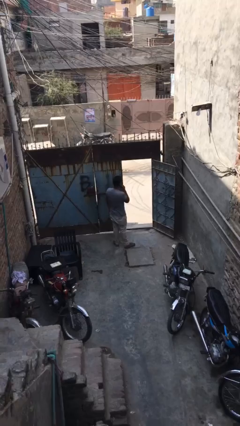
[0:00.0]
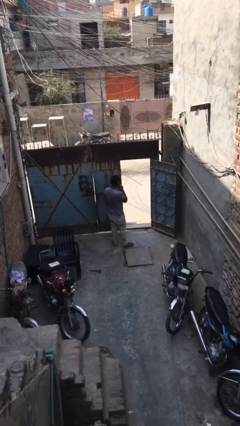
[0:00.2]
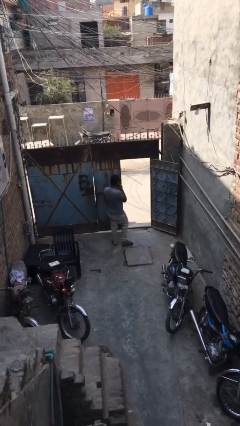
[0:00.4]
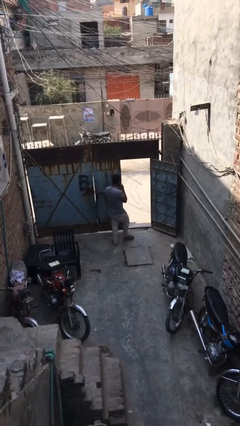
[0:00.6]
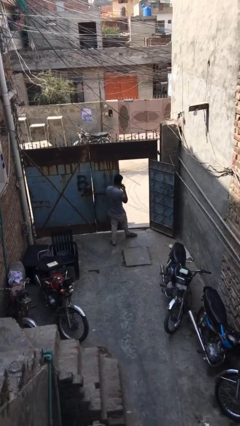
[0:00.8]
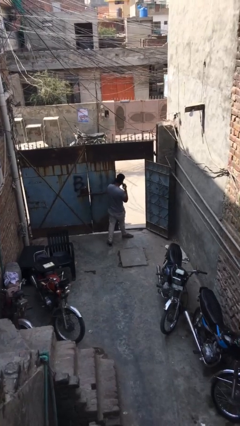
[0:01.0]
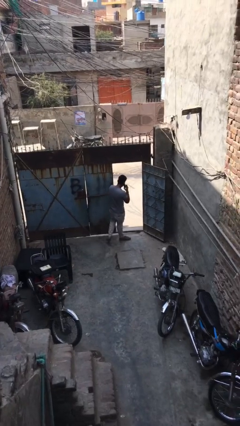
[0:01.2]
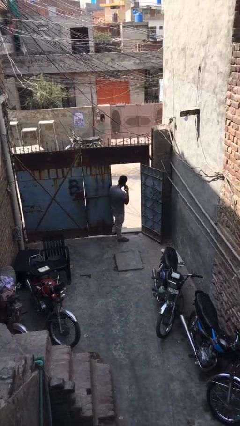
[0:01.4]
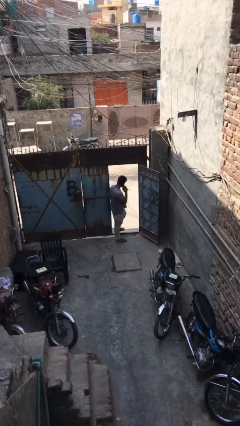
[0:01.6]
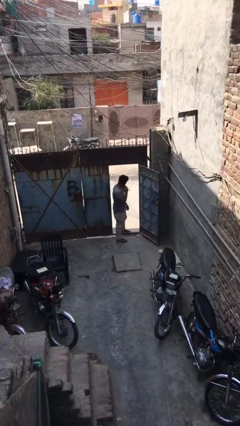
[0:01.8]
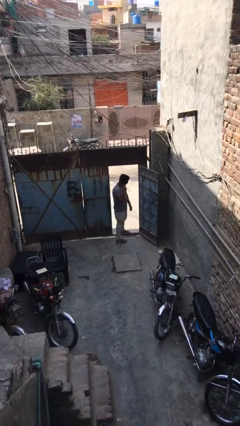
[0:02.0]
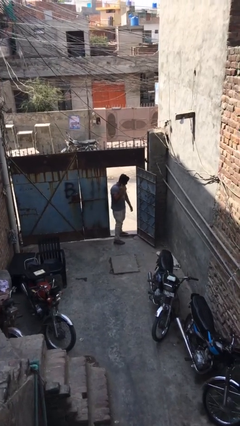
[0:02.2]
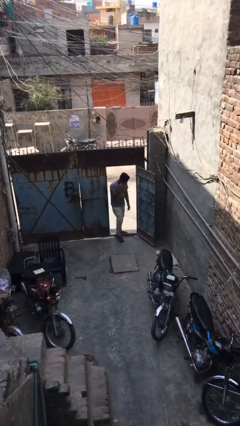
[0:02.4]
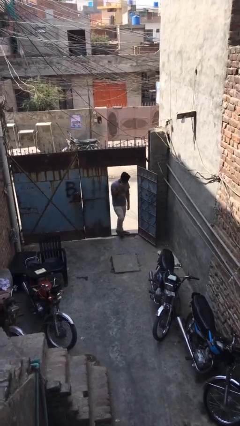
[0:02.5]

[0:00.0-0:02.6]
person exits scene through structure

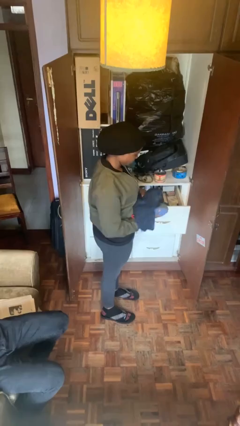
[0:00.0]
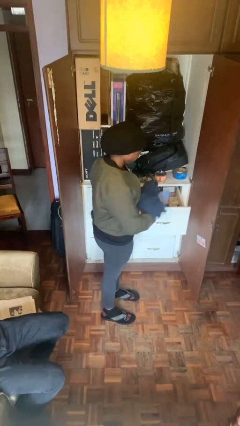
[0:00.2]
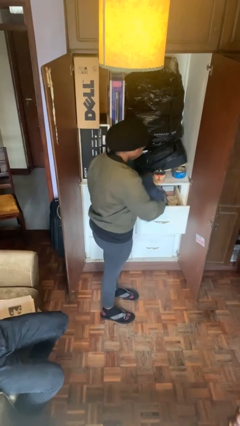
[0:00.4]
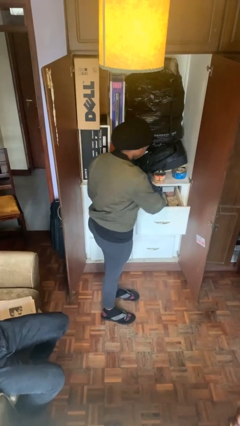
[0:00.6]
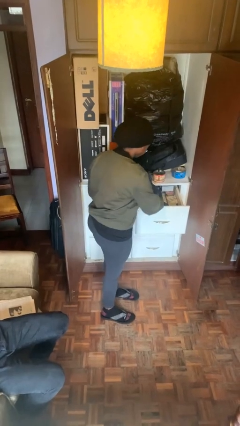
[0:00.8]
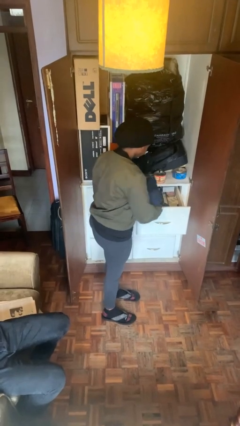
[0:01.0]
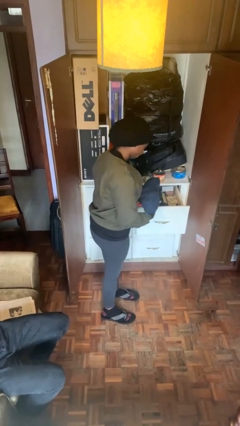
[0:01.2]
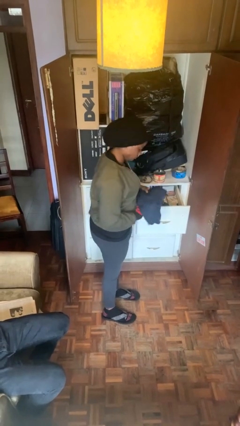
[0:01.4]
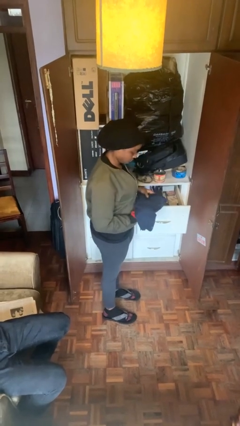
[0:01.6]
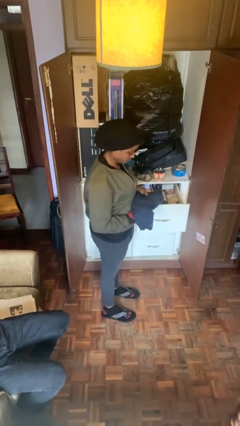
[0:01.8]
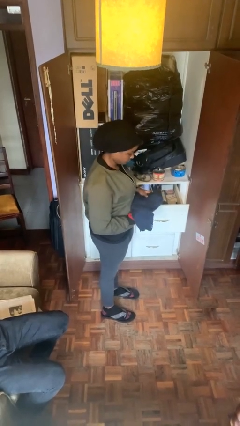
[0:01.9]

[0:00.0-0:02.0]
person puts clothes into dresser

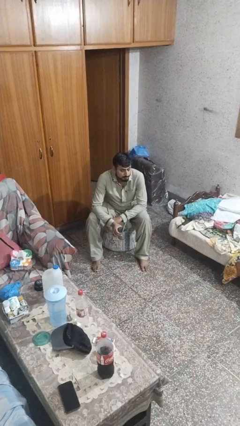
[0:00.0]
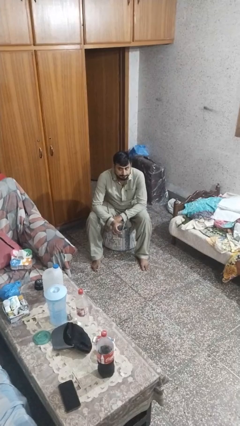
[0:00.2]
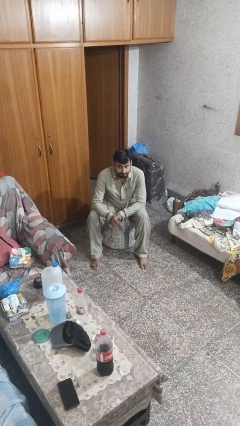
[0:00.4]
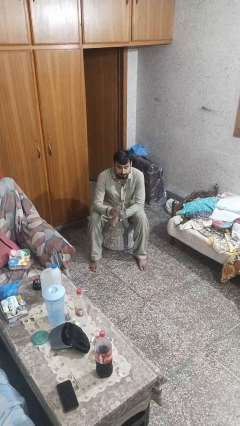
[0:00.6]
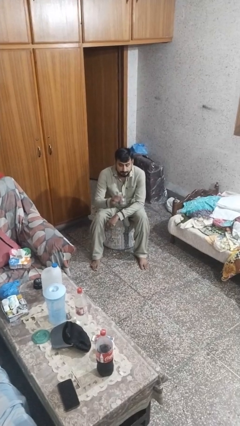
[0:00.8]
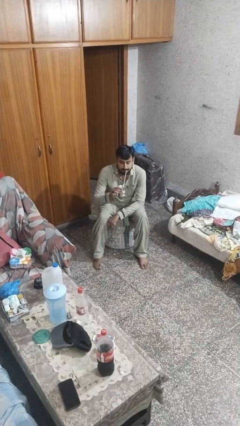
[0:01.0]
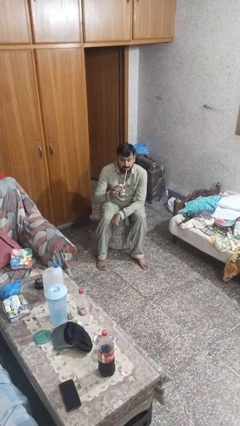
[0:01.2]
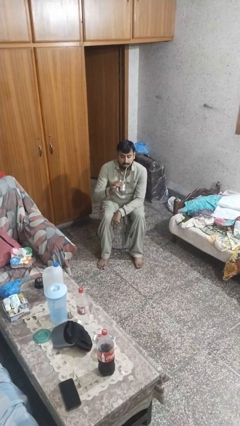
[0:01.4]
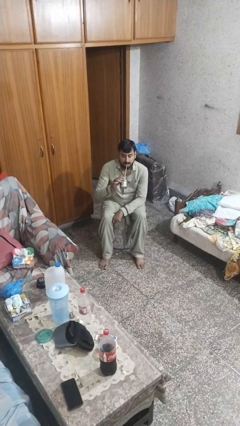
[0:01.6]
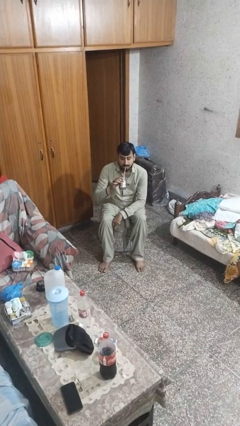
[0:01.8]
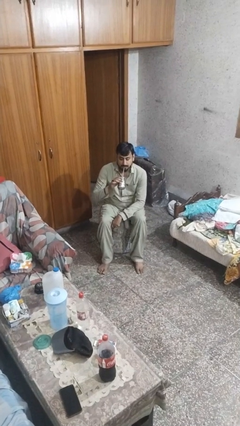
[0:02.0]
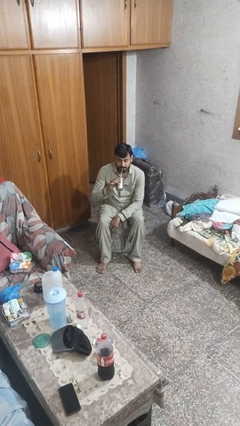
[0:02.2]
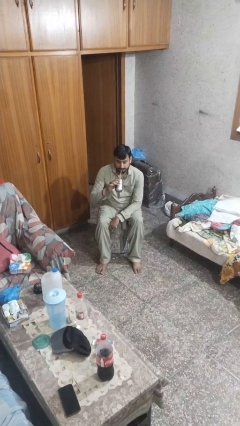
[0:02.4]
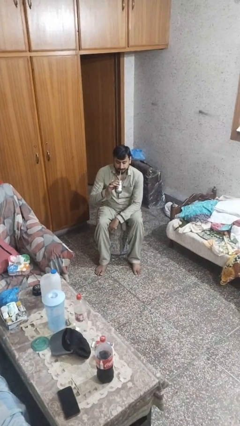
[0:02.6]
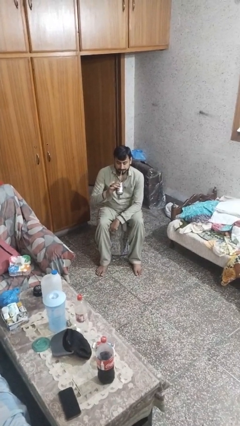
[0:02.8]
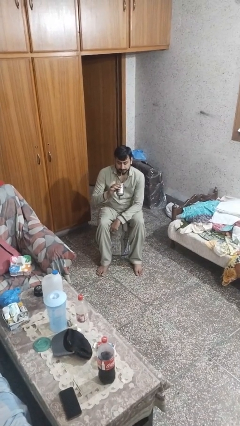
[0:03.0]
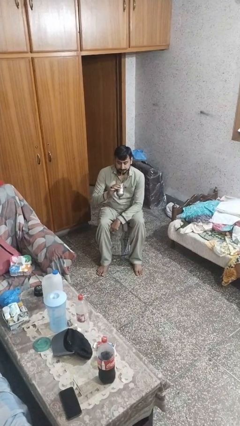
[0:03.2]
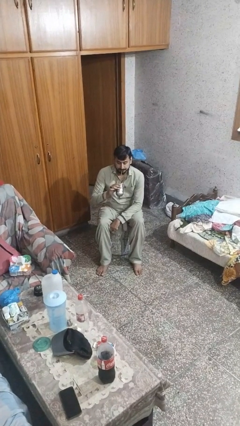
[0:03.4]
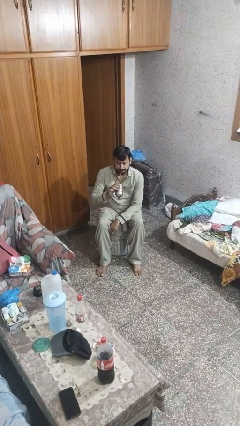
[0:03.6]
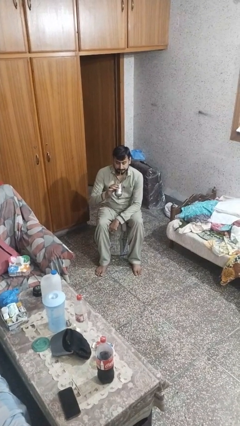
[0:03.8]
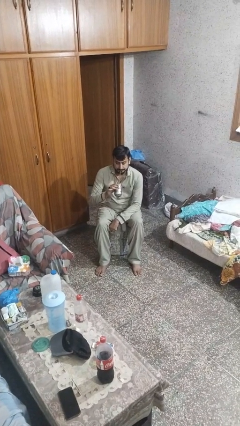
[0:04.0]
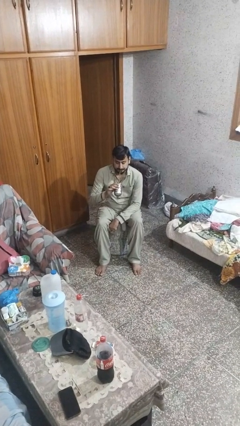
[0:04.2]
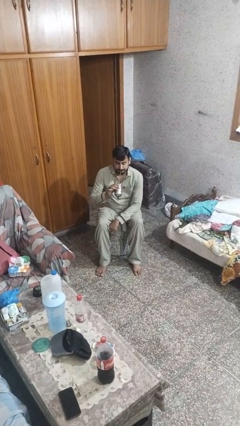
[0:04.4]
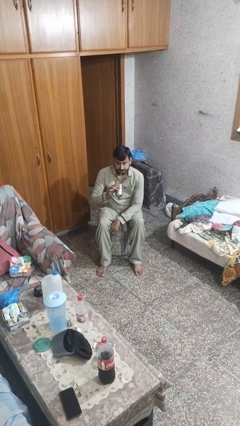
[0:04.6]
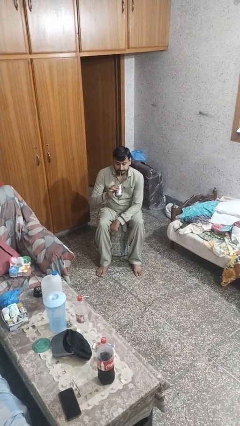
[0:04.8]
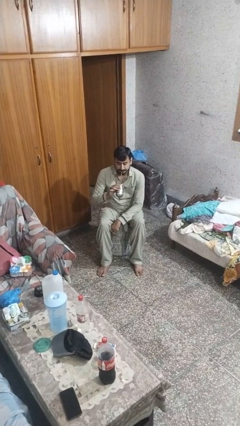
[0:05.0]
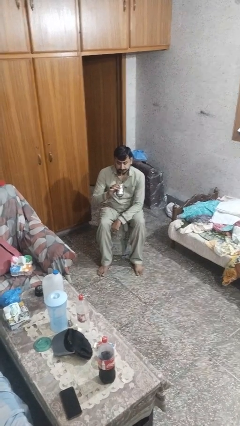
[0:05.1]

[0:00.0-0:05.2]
person drinks from straw

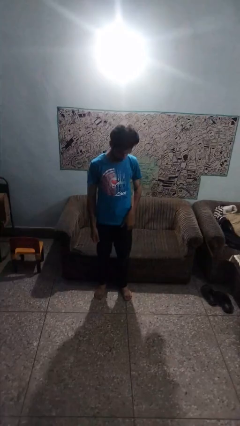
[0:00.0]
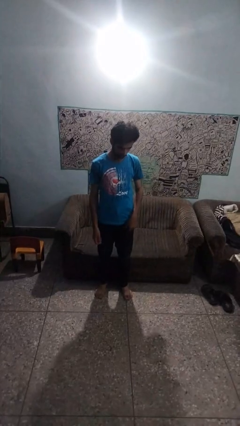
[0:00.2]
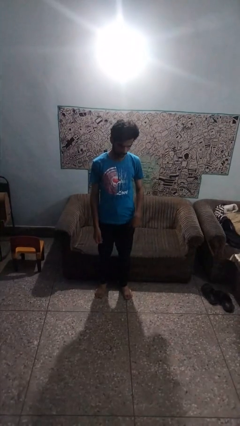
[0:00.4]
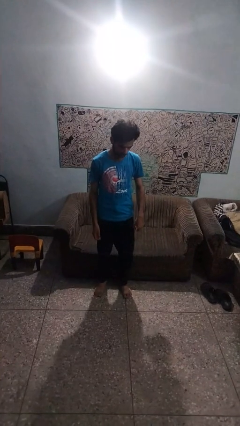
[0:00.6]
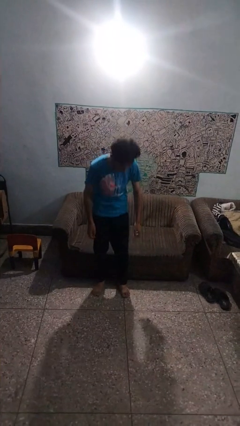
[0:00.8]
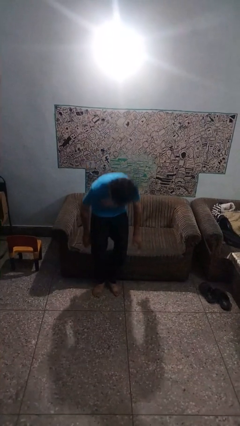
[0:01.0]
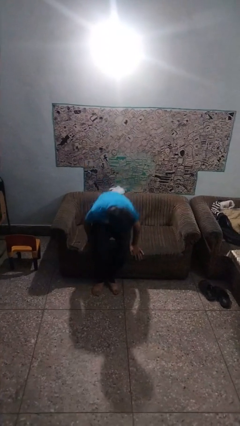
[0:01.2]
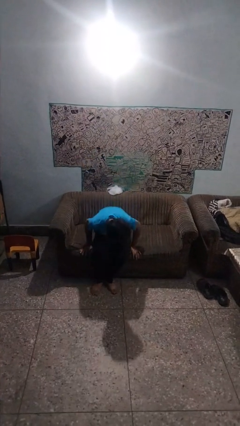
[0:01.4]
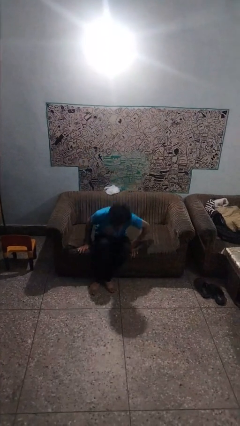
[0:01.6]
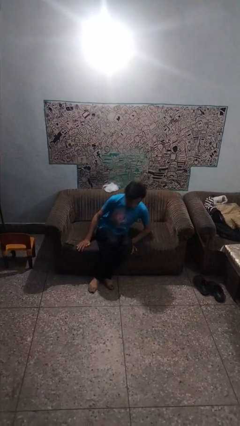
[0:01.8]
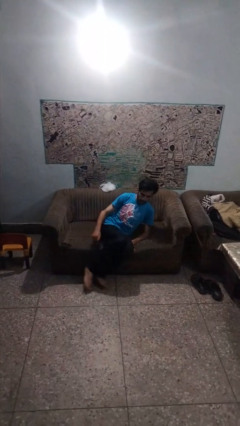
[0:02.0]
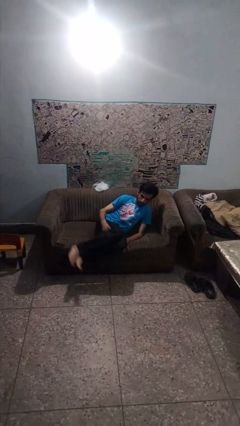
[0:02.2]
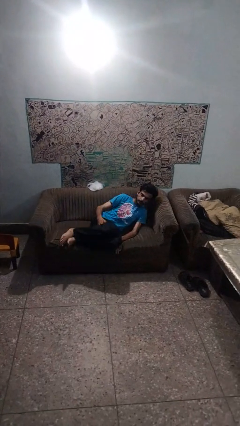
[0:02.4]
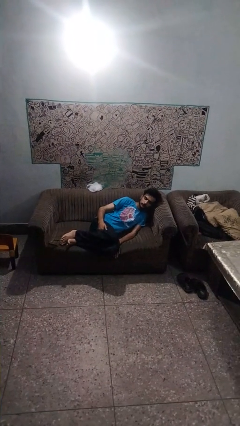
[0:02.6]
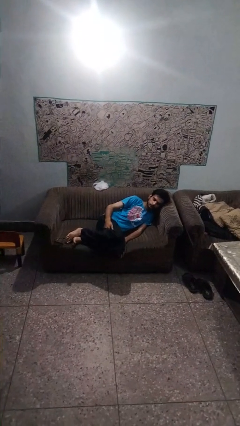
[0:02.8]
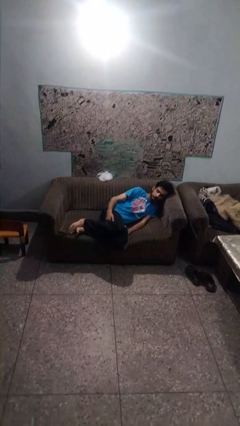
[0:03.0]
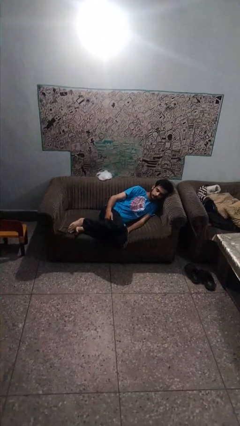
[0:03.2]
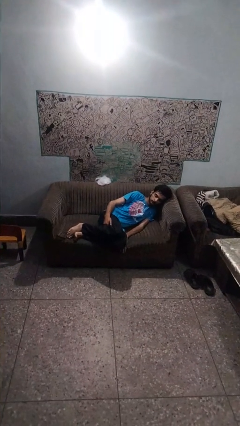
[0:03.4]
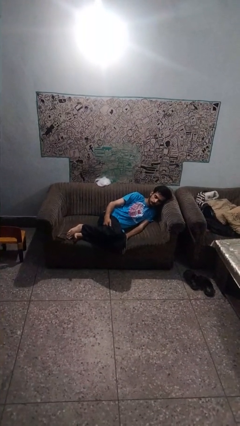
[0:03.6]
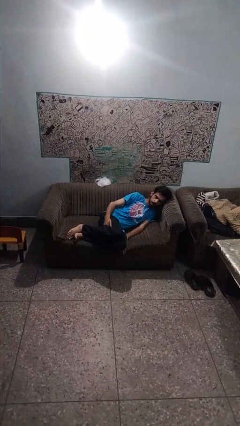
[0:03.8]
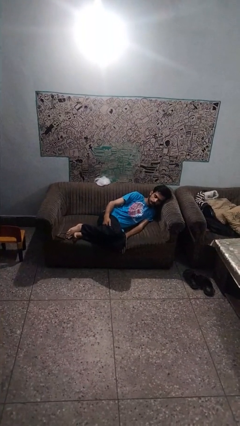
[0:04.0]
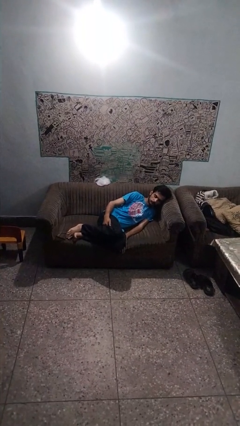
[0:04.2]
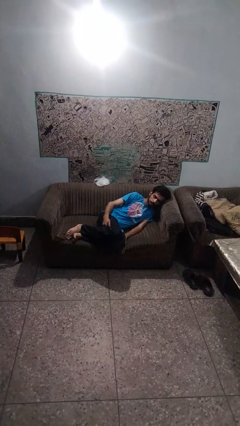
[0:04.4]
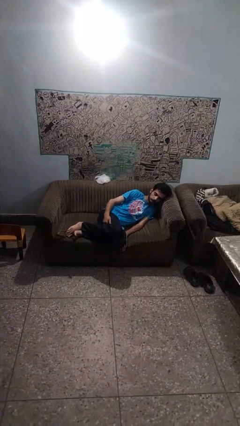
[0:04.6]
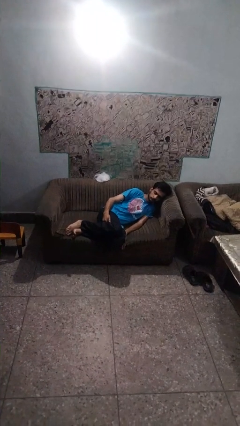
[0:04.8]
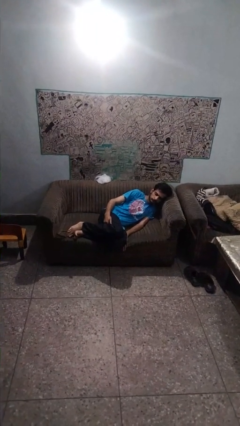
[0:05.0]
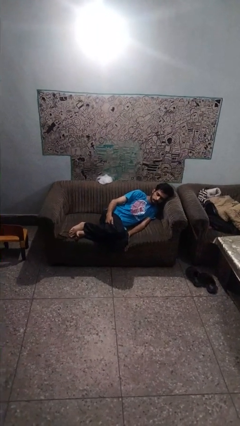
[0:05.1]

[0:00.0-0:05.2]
person lies down on couch

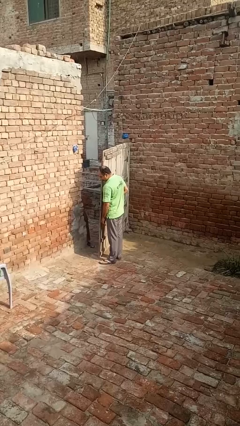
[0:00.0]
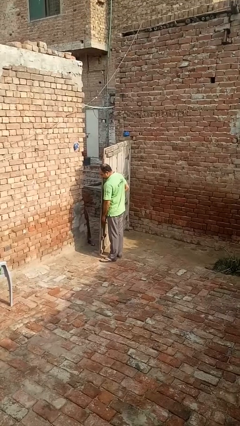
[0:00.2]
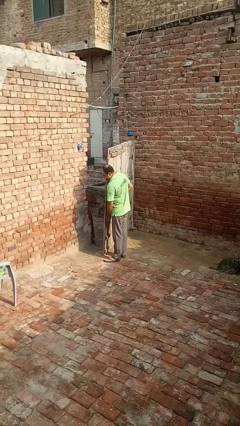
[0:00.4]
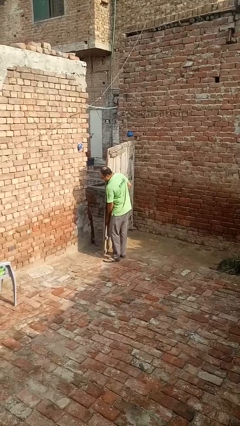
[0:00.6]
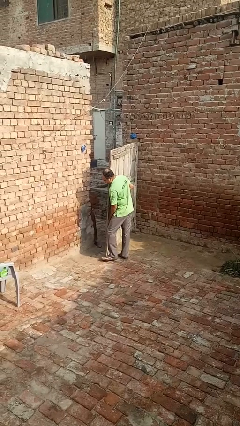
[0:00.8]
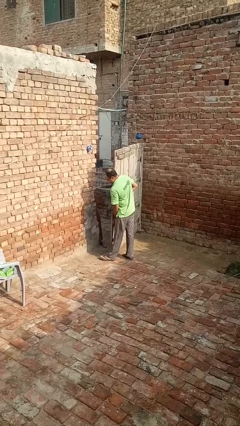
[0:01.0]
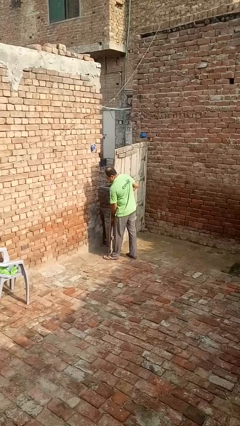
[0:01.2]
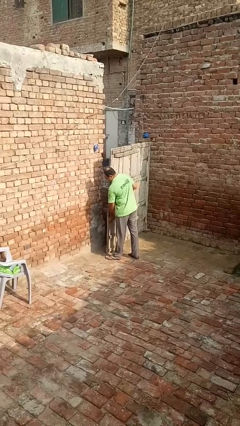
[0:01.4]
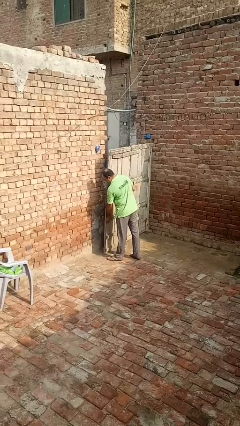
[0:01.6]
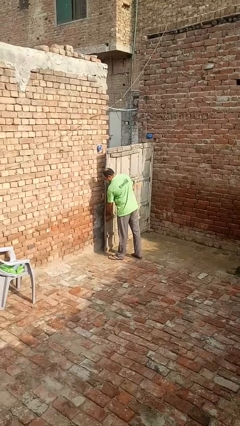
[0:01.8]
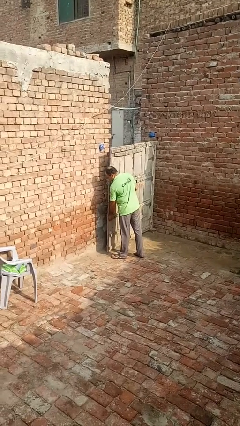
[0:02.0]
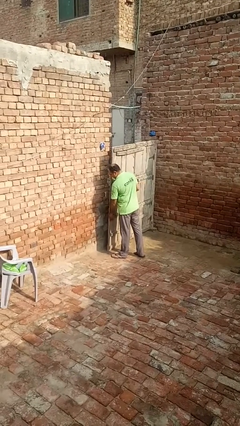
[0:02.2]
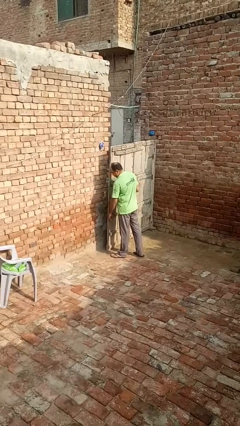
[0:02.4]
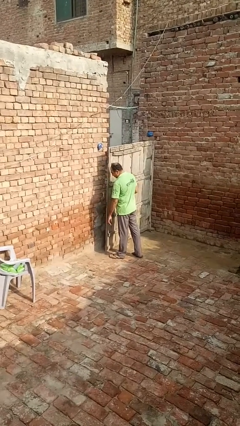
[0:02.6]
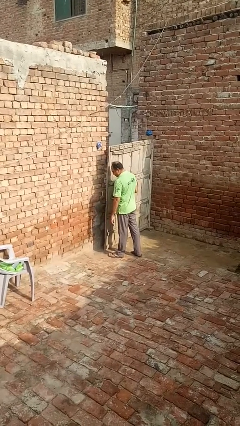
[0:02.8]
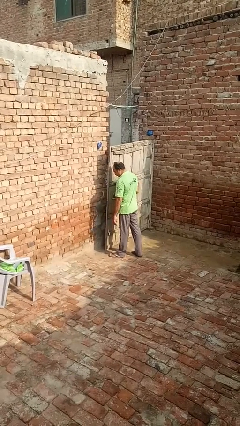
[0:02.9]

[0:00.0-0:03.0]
person closes gate
